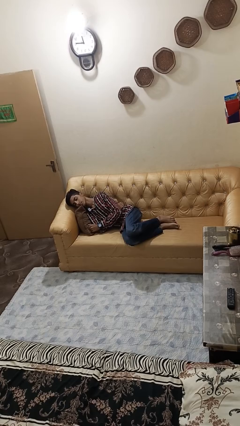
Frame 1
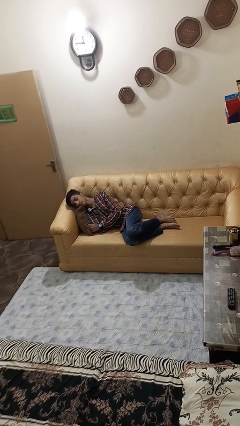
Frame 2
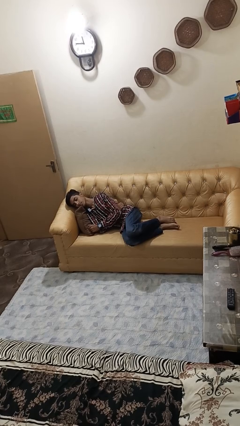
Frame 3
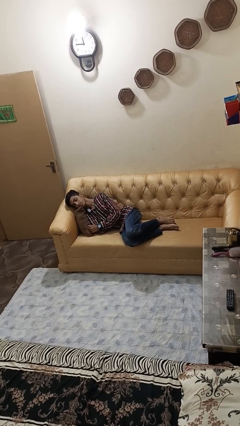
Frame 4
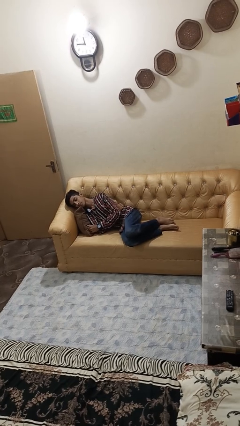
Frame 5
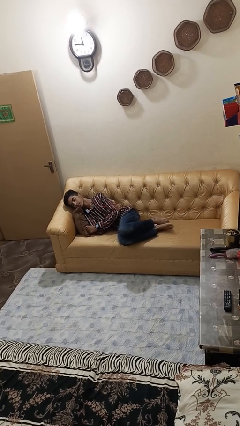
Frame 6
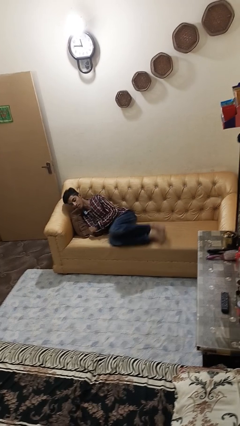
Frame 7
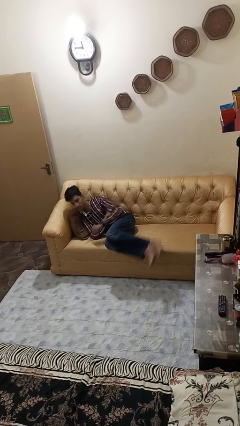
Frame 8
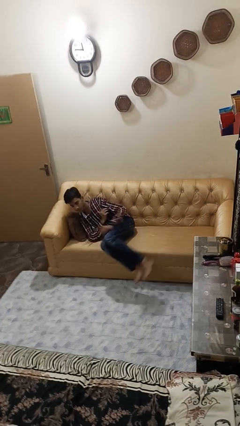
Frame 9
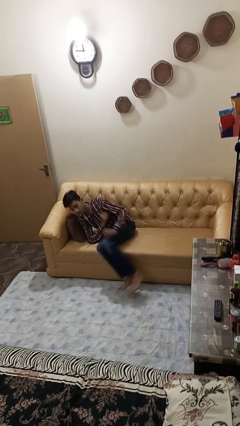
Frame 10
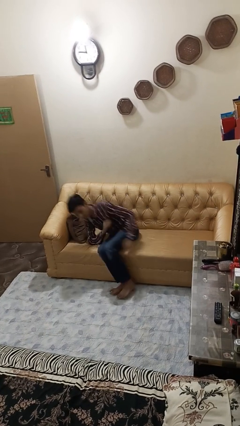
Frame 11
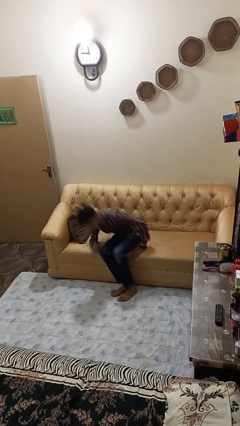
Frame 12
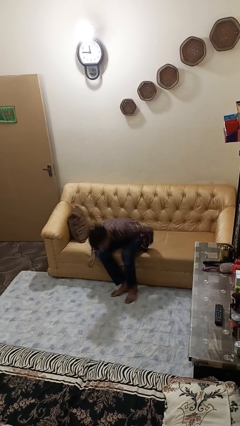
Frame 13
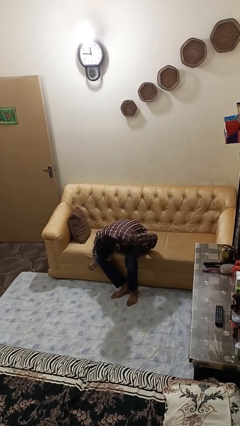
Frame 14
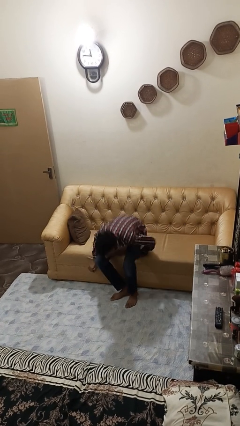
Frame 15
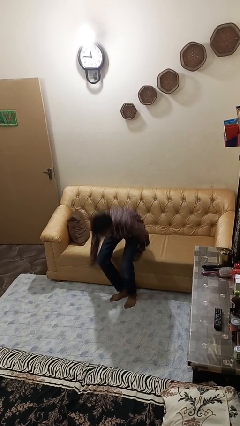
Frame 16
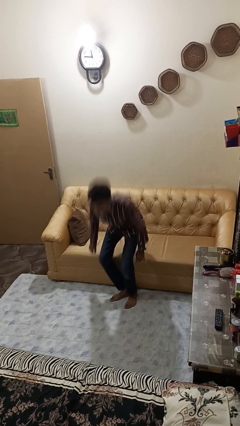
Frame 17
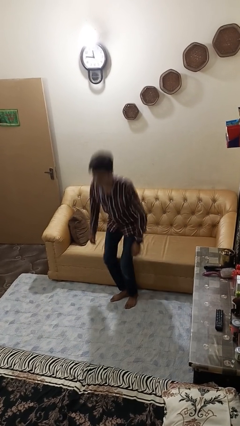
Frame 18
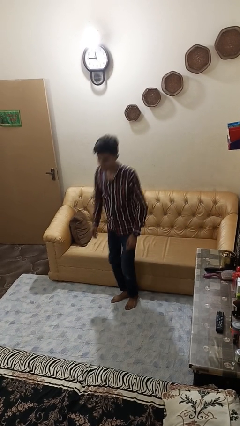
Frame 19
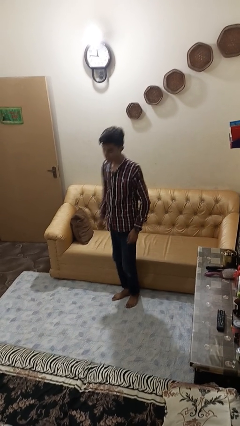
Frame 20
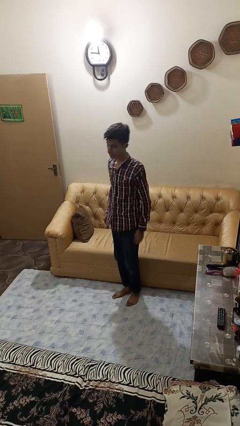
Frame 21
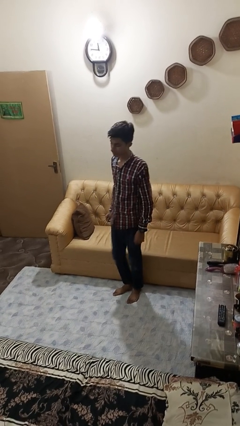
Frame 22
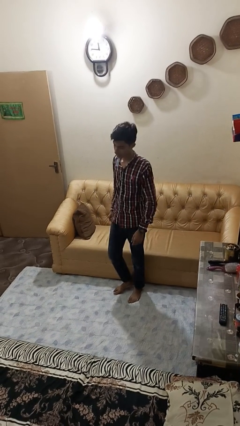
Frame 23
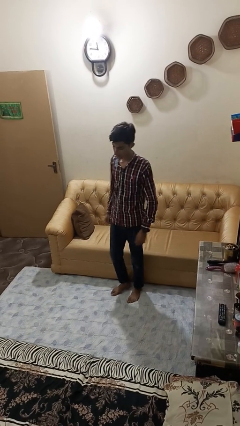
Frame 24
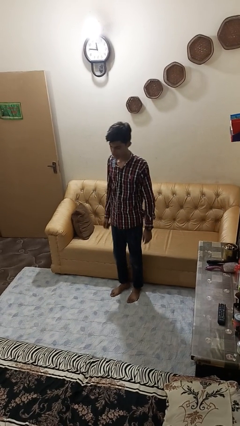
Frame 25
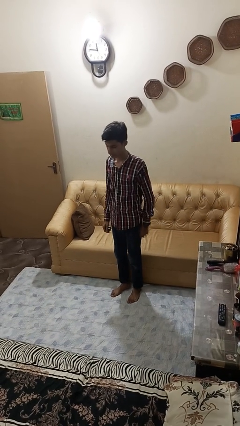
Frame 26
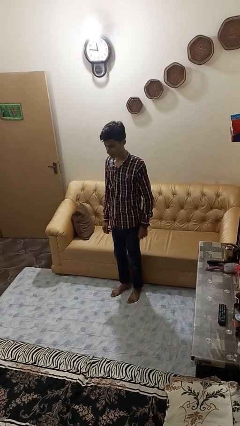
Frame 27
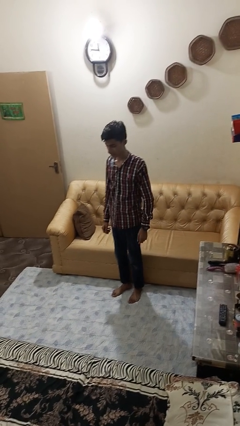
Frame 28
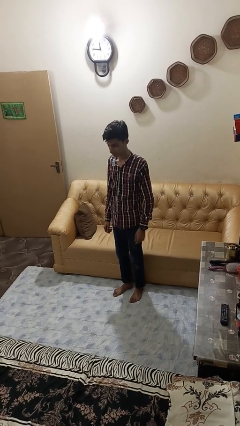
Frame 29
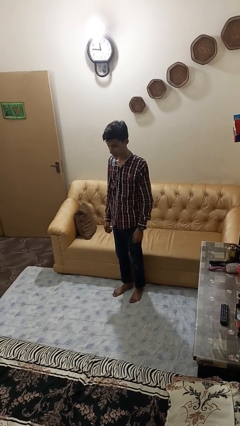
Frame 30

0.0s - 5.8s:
person stands up

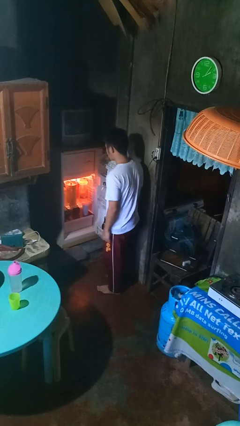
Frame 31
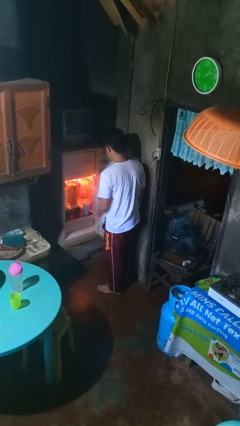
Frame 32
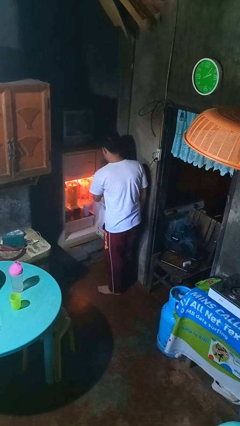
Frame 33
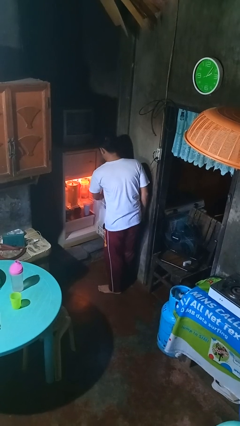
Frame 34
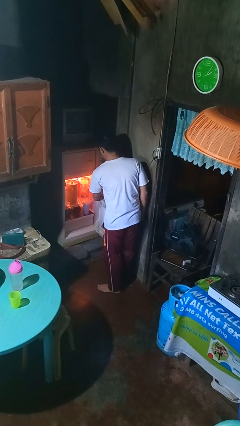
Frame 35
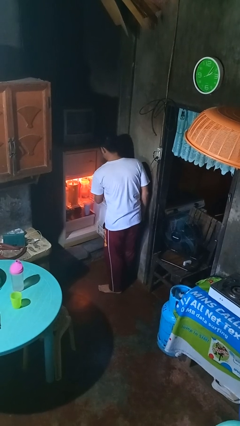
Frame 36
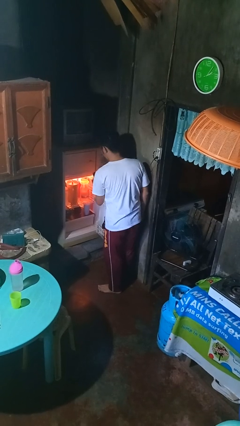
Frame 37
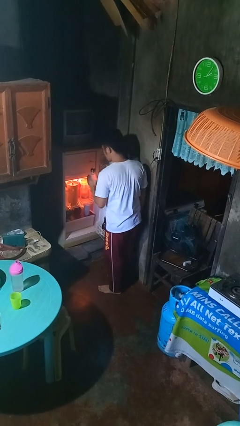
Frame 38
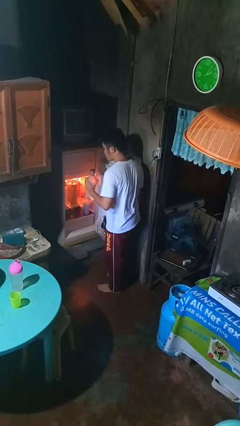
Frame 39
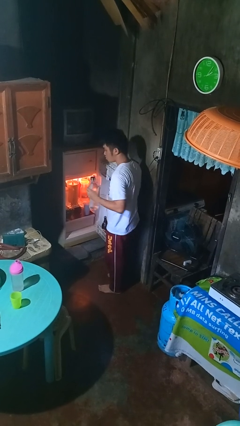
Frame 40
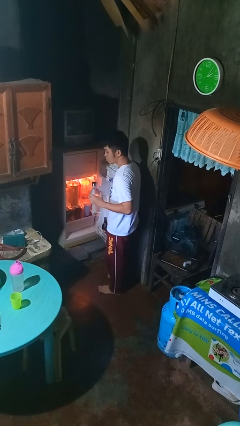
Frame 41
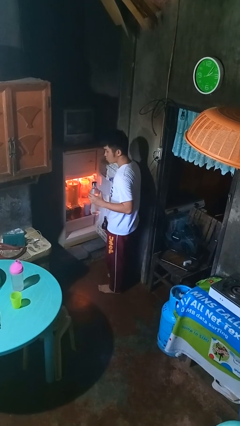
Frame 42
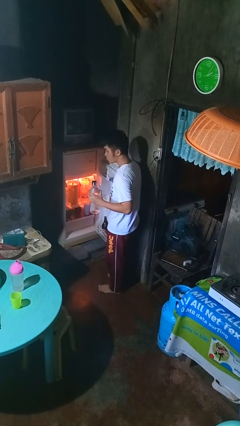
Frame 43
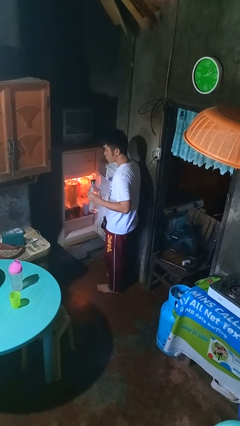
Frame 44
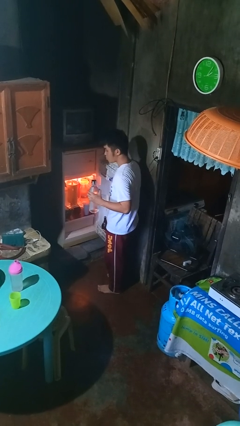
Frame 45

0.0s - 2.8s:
person takes object from refrigerator

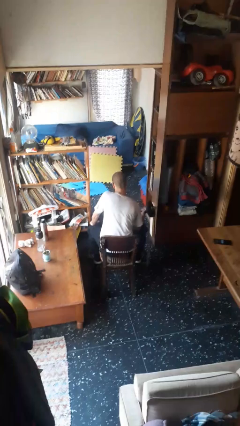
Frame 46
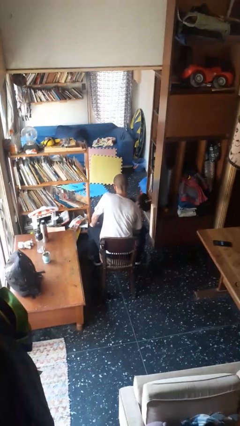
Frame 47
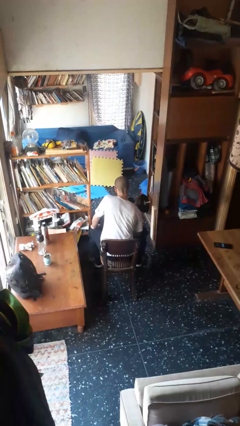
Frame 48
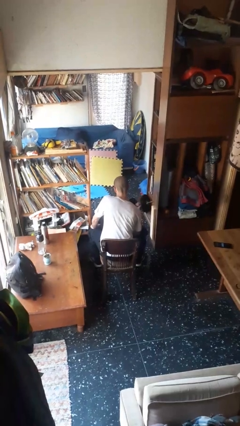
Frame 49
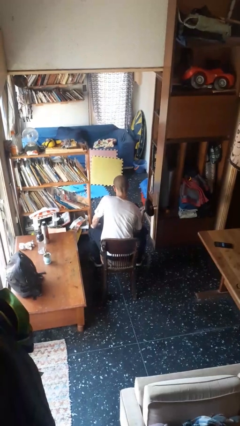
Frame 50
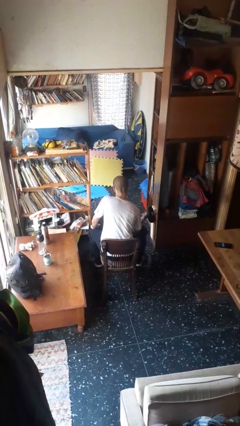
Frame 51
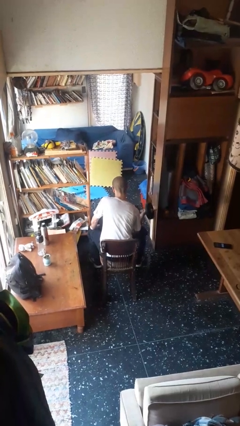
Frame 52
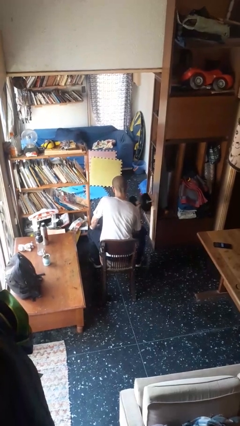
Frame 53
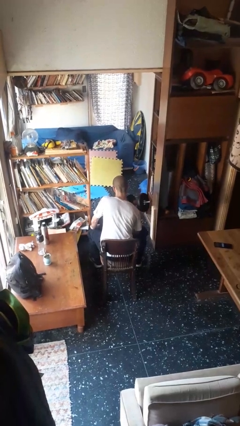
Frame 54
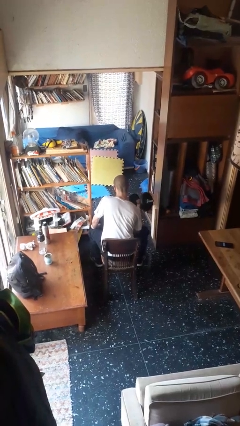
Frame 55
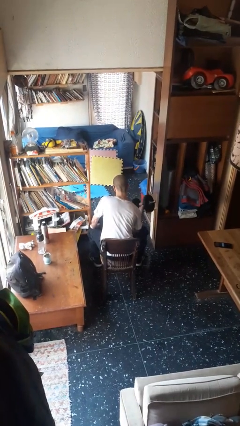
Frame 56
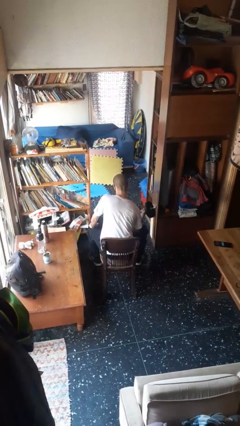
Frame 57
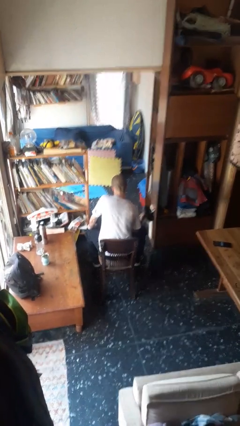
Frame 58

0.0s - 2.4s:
person lifts dumbbells

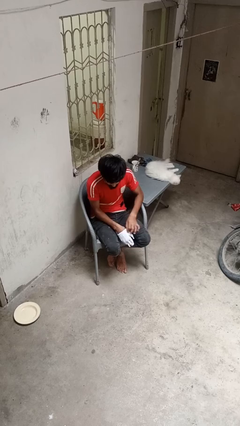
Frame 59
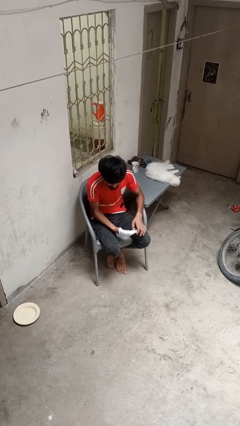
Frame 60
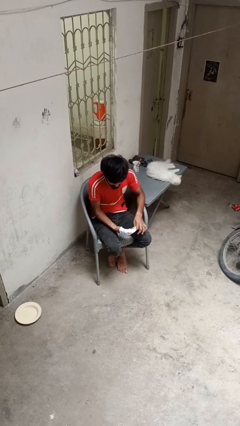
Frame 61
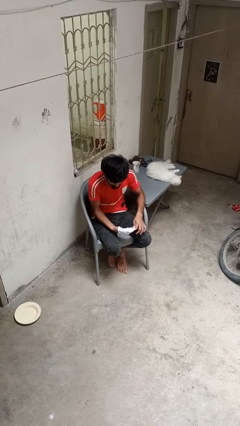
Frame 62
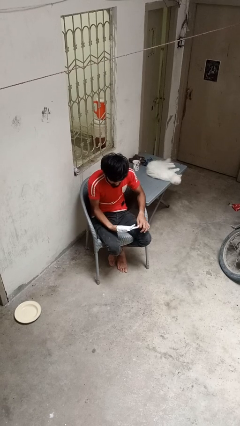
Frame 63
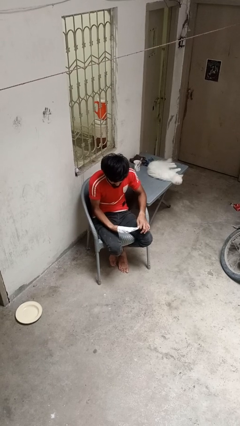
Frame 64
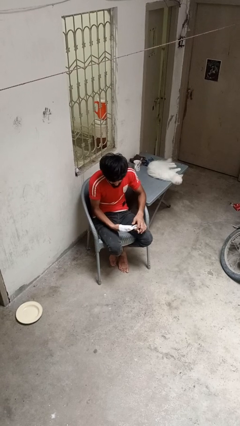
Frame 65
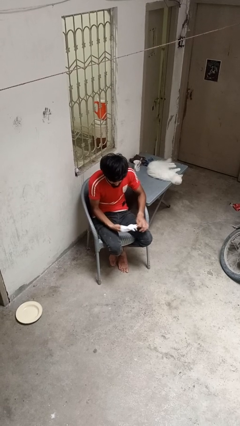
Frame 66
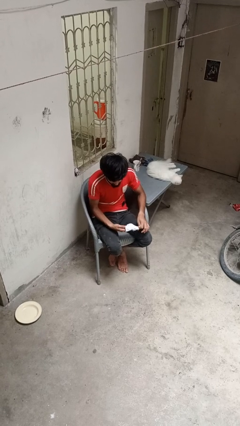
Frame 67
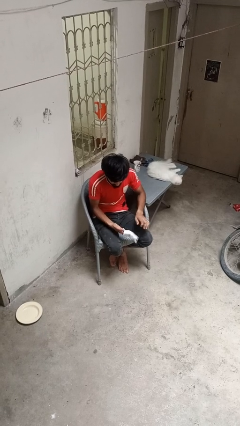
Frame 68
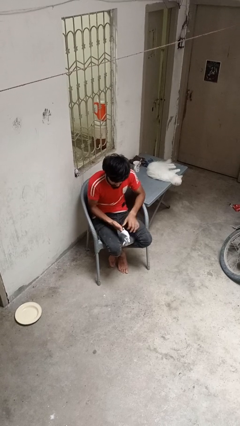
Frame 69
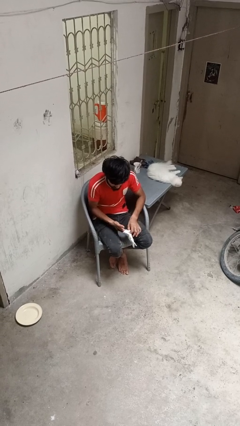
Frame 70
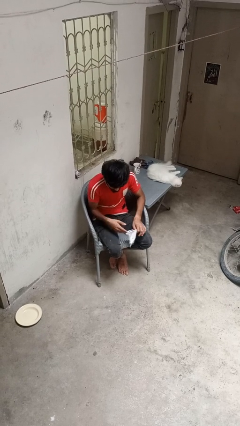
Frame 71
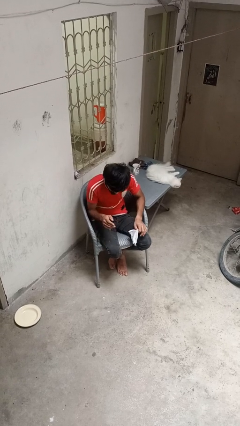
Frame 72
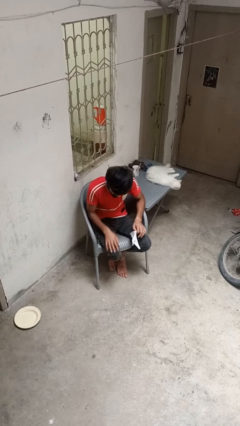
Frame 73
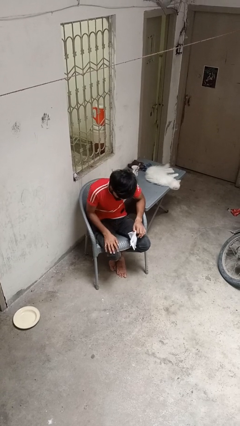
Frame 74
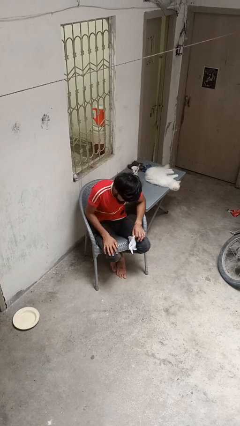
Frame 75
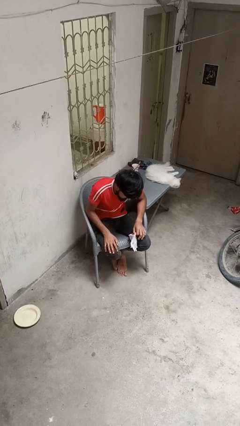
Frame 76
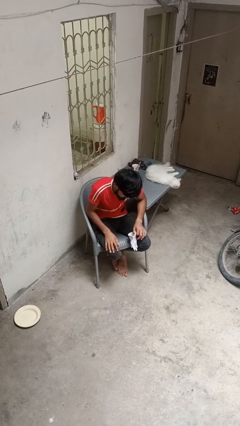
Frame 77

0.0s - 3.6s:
person takes off gloves

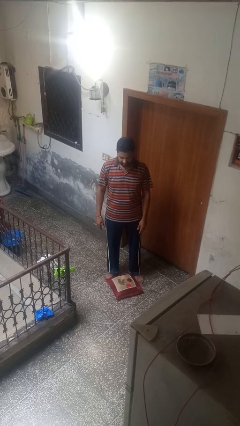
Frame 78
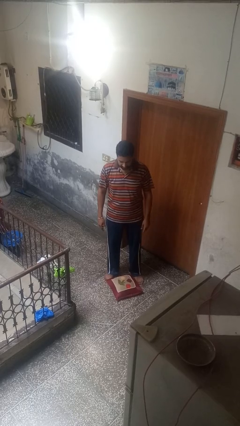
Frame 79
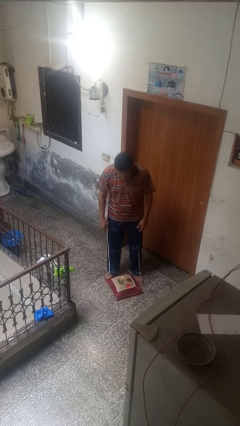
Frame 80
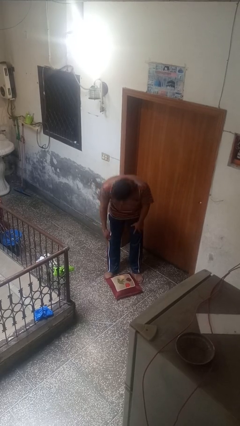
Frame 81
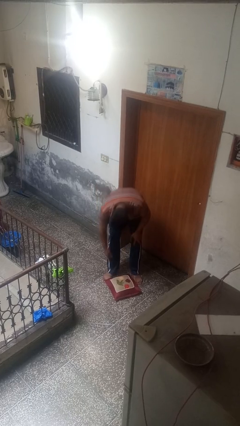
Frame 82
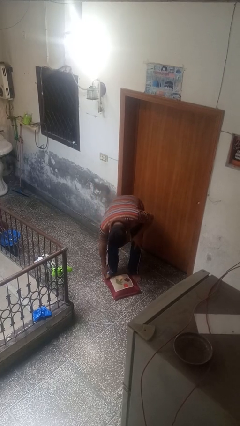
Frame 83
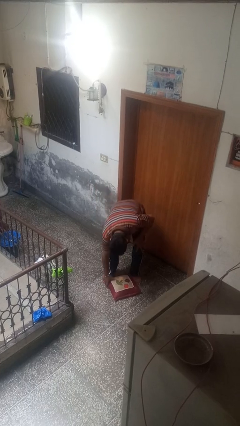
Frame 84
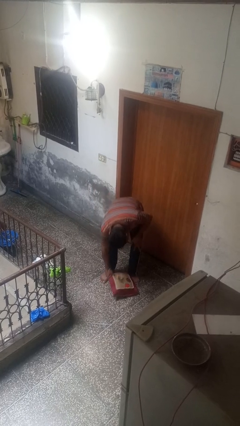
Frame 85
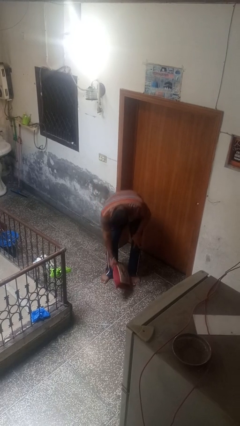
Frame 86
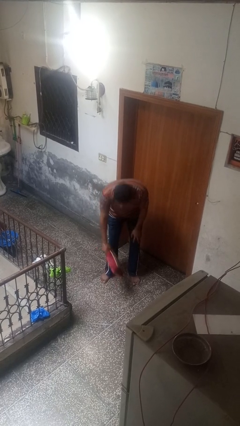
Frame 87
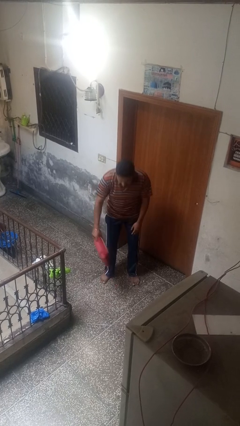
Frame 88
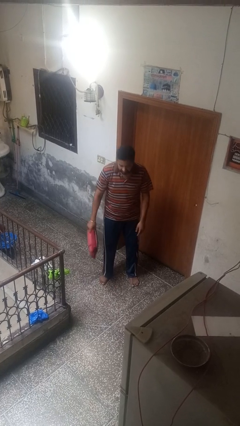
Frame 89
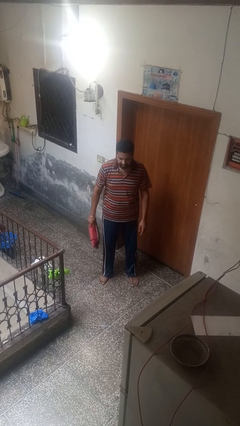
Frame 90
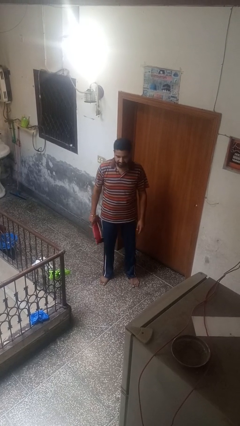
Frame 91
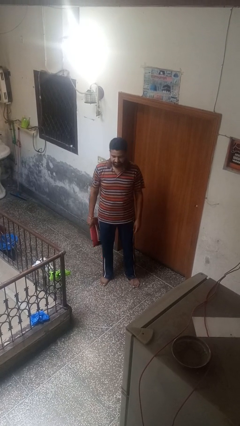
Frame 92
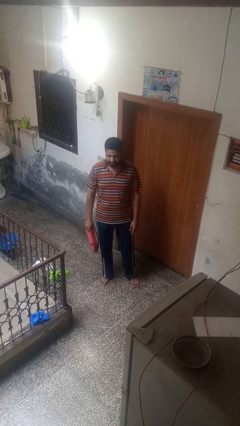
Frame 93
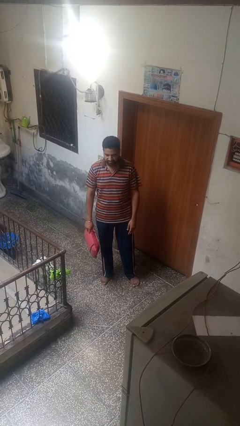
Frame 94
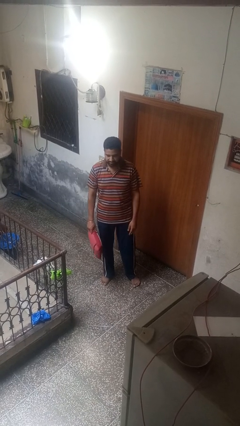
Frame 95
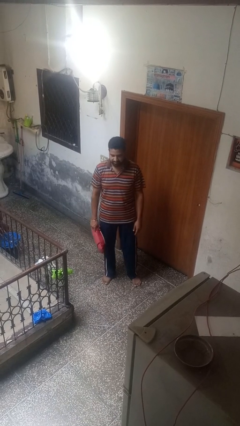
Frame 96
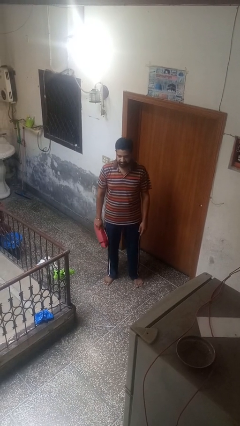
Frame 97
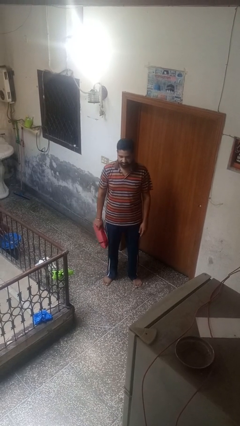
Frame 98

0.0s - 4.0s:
person picks up object from floor
